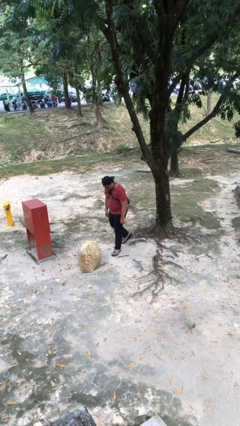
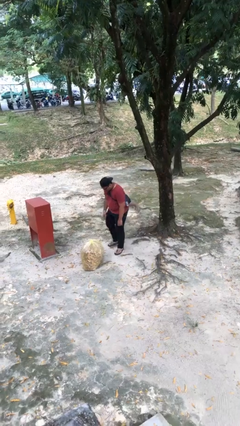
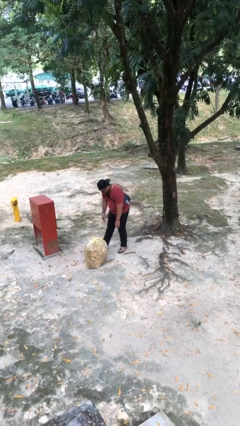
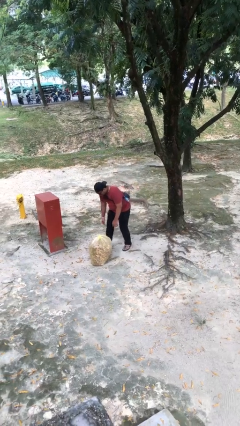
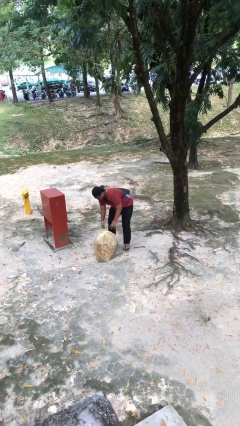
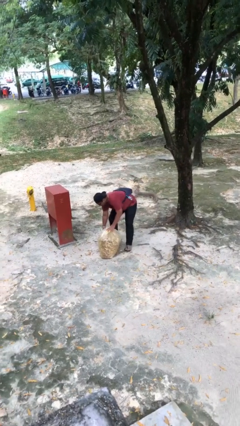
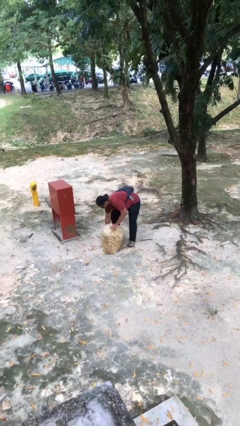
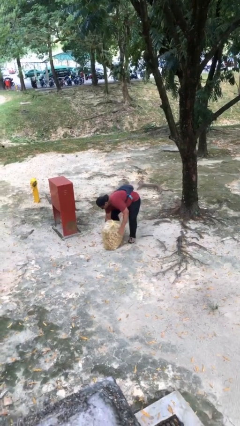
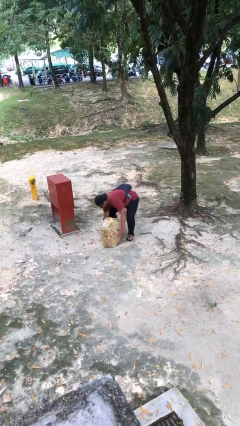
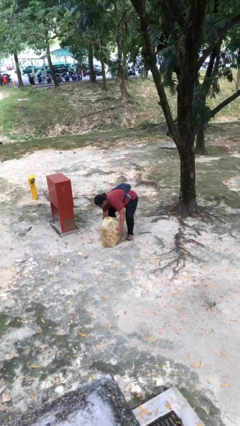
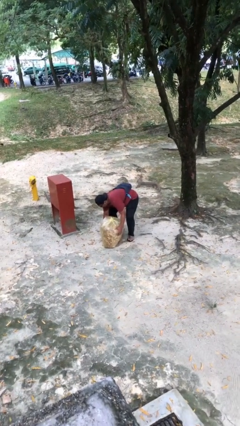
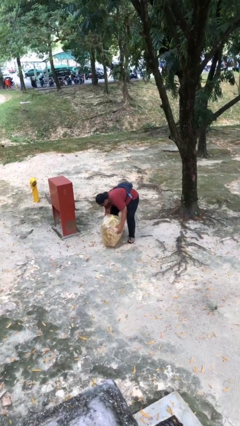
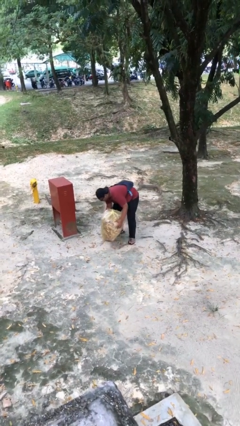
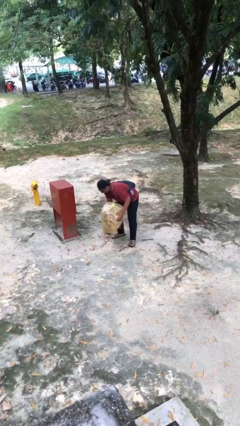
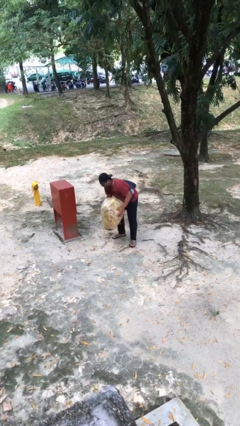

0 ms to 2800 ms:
person picks up object from floor

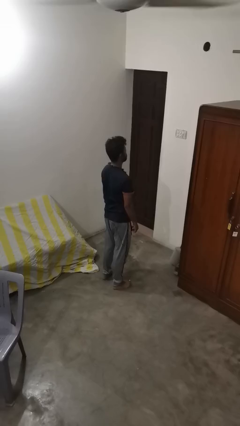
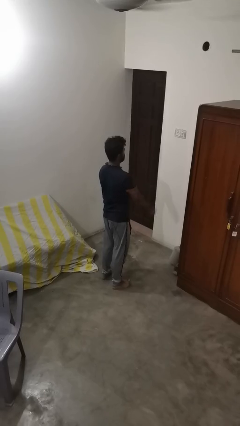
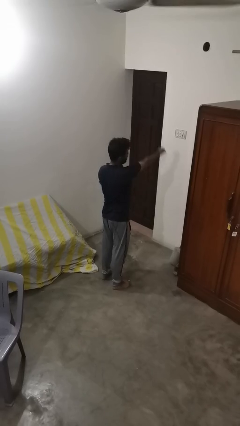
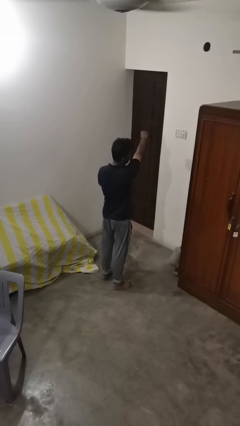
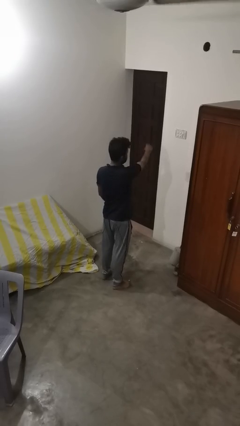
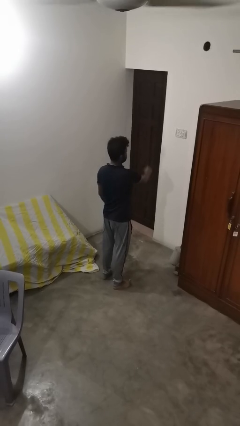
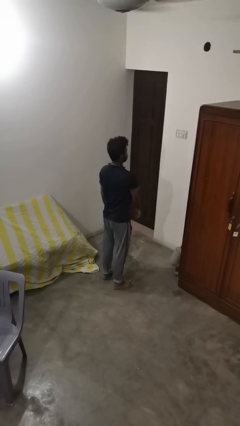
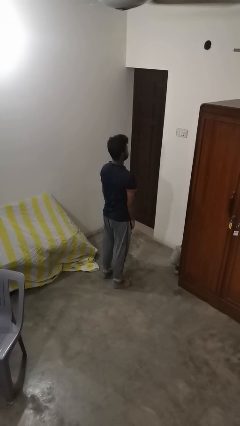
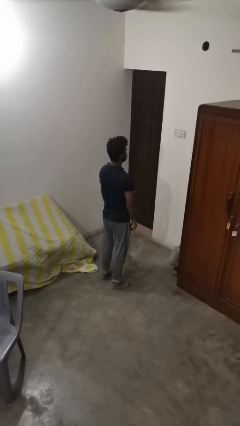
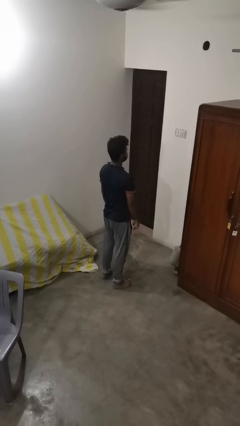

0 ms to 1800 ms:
person punches

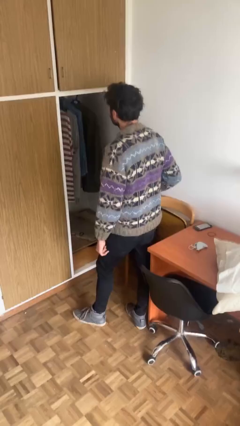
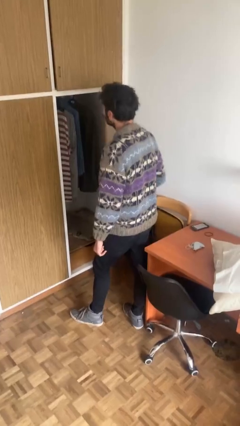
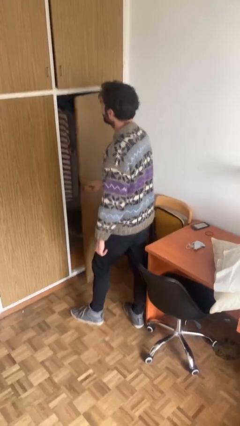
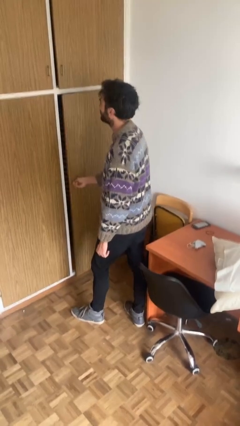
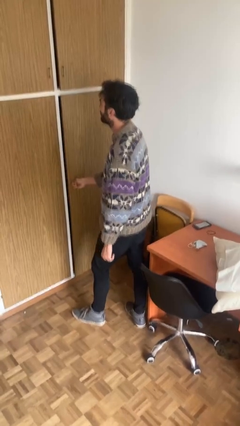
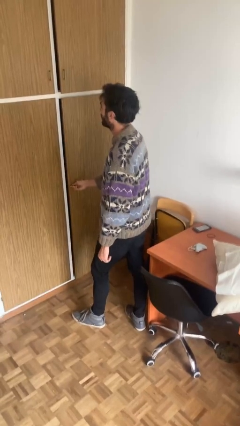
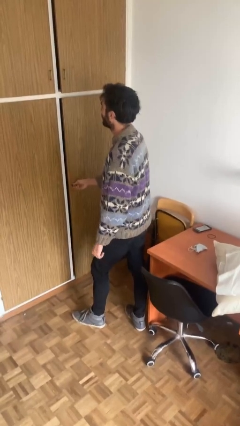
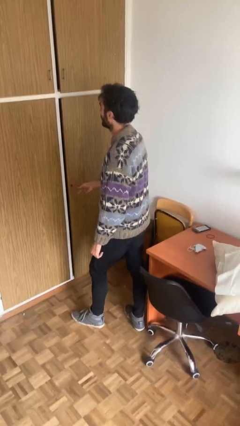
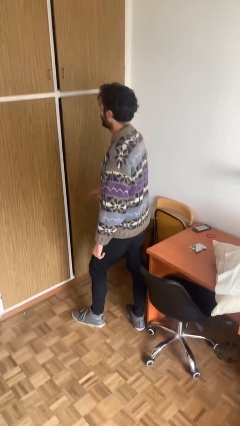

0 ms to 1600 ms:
person closes closet door

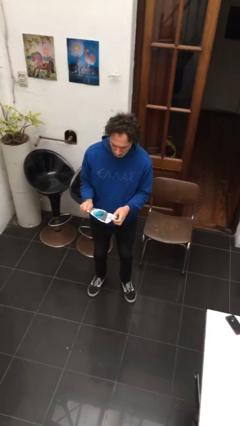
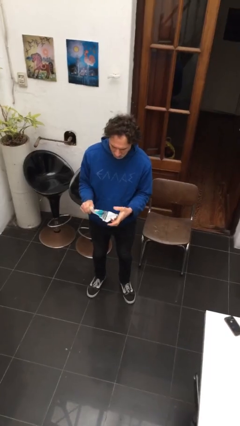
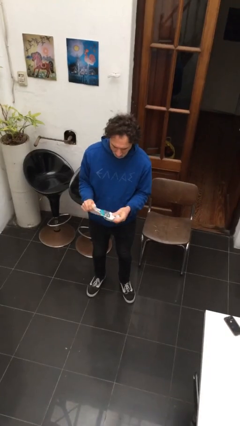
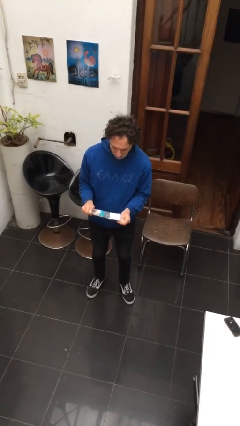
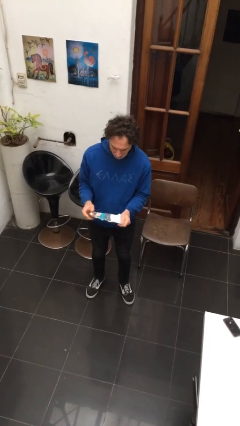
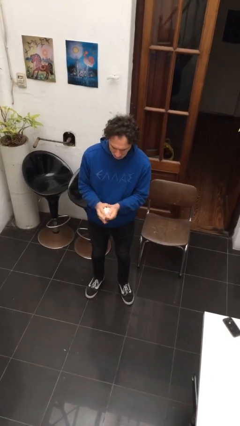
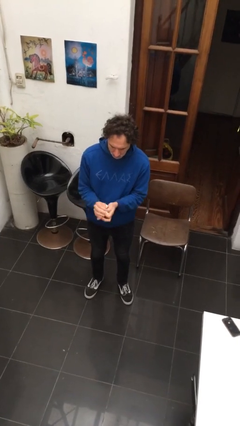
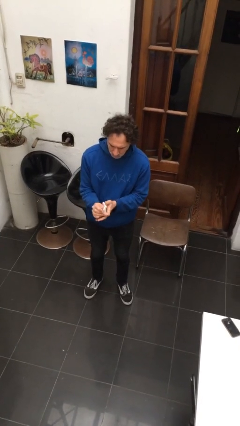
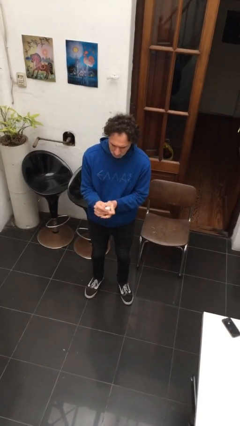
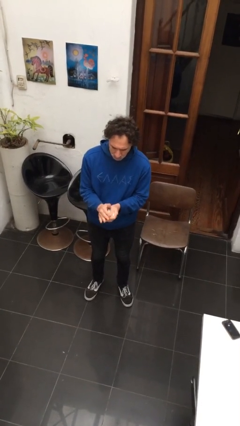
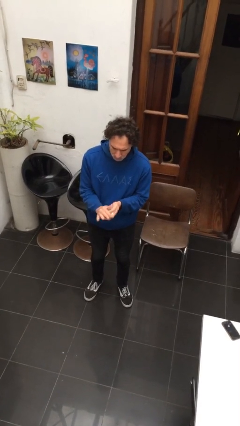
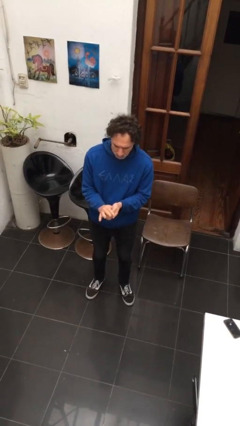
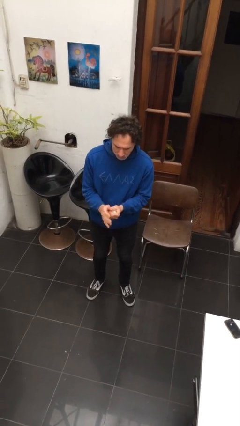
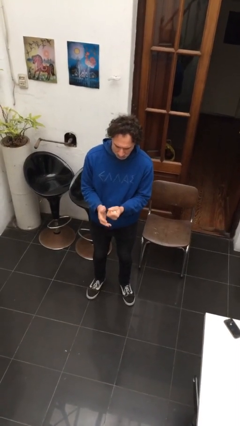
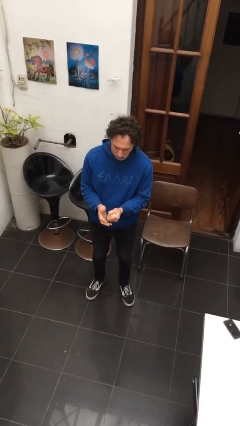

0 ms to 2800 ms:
person crumples paper

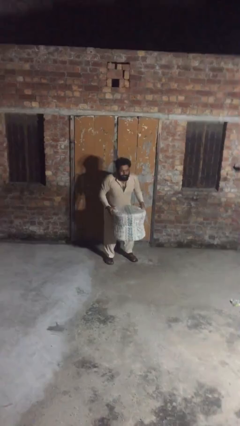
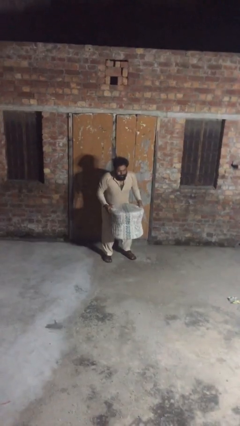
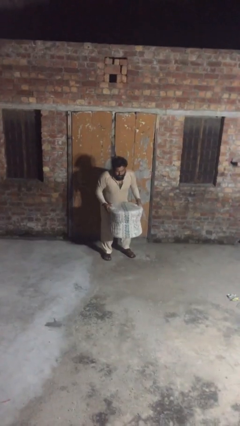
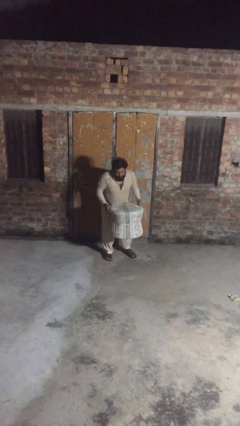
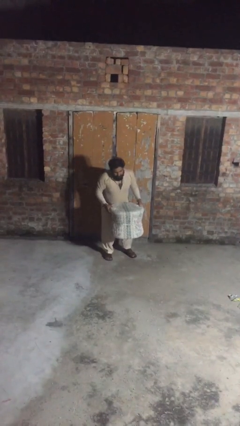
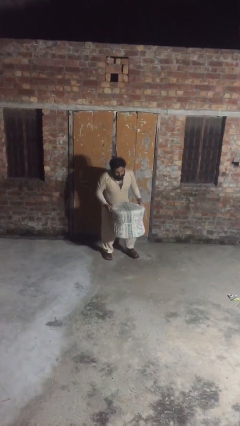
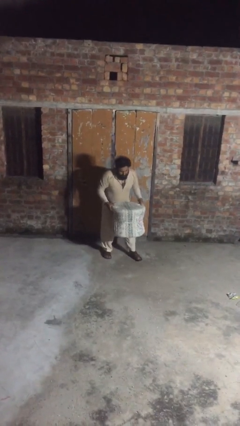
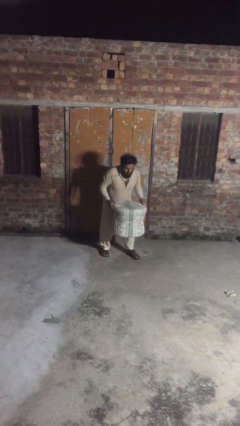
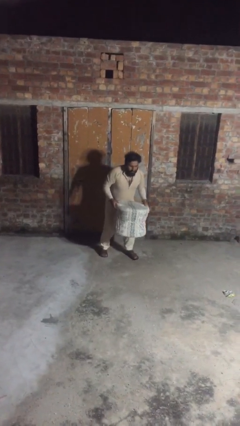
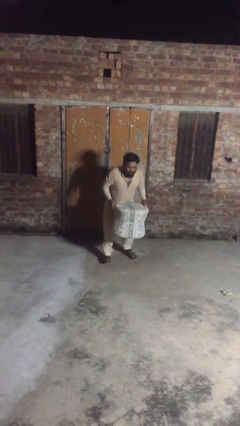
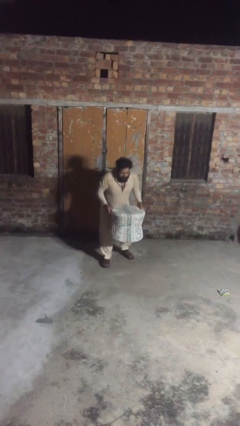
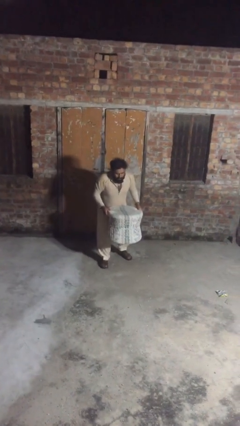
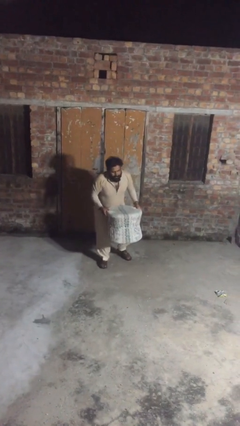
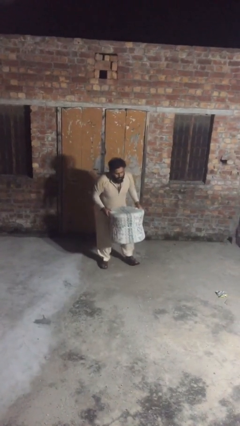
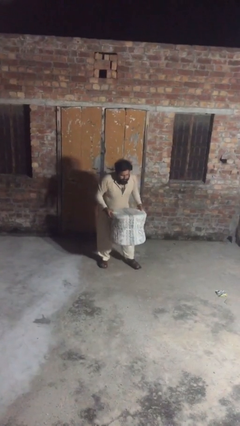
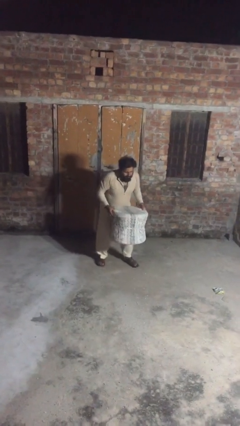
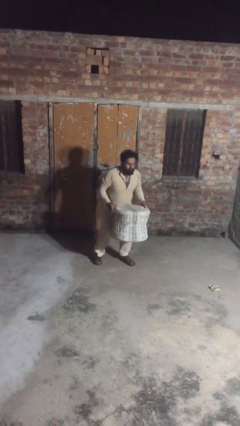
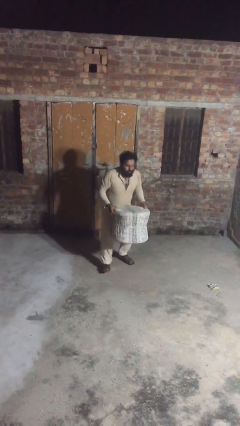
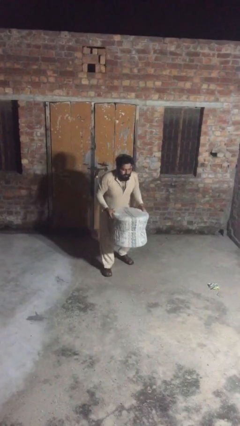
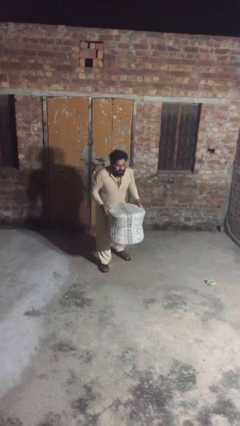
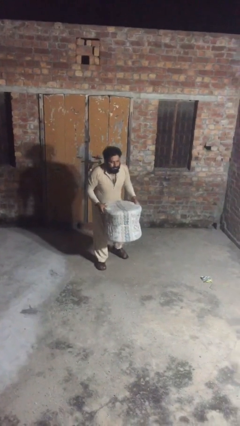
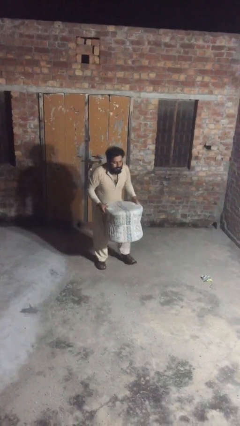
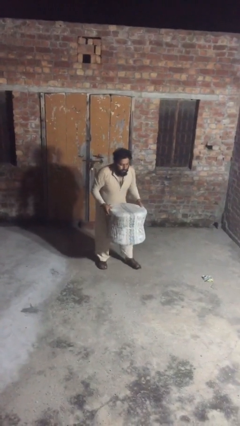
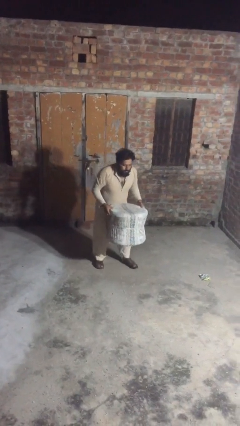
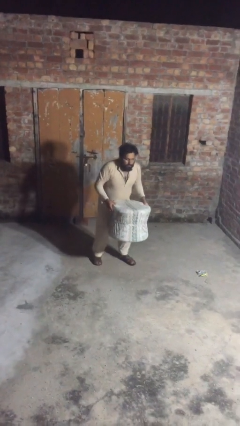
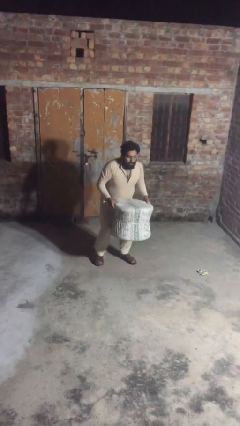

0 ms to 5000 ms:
person carries heavy object

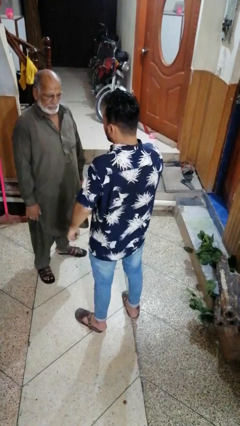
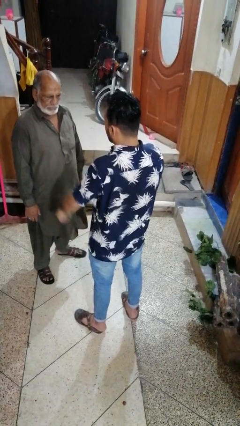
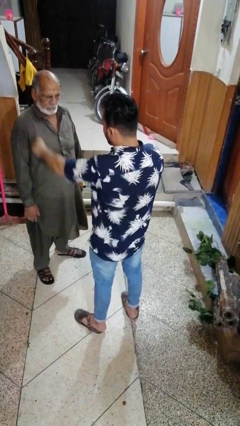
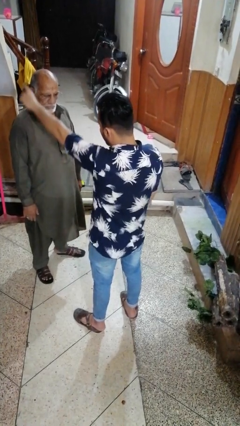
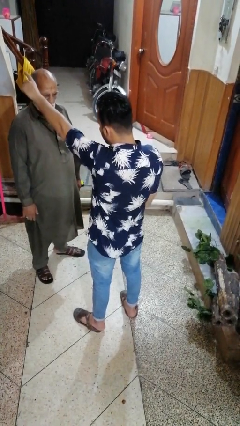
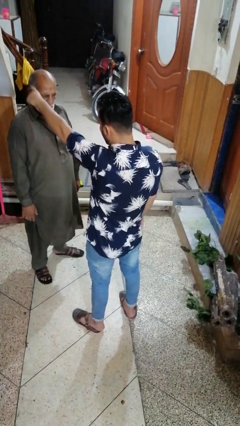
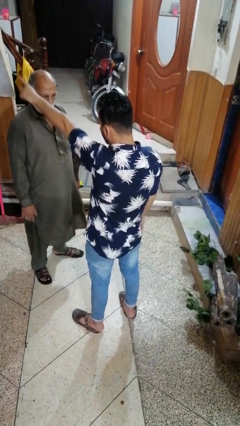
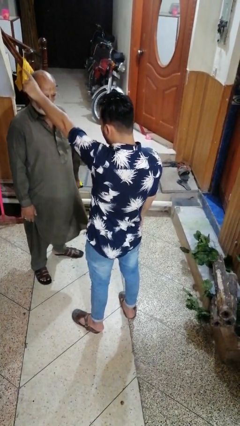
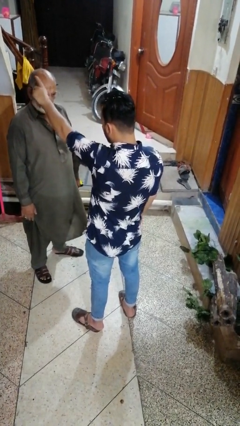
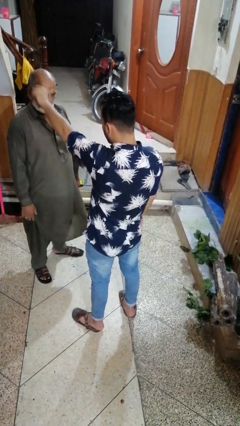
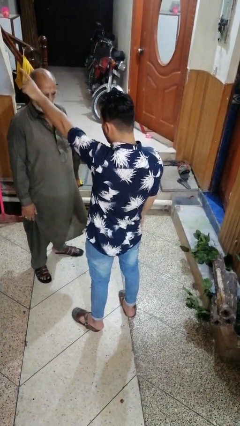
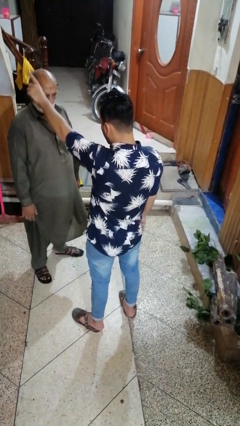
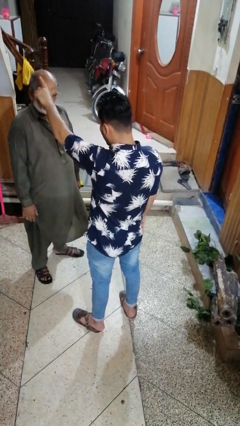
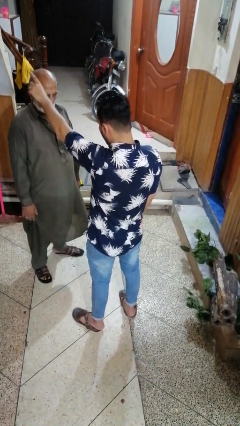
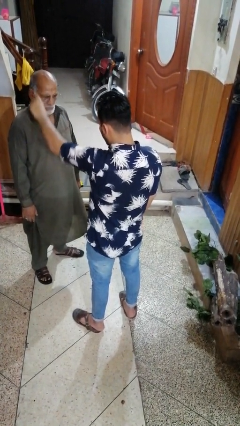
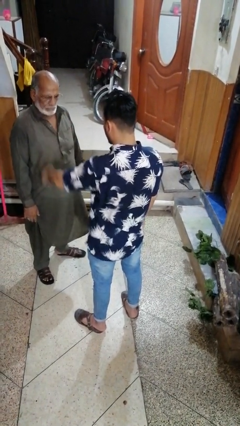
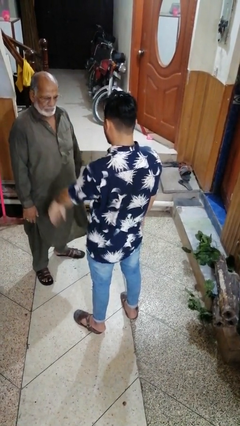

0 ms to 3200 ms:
person shoves person

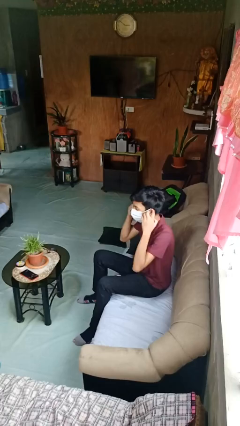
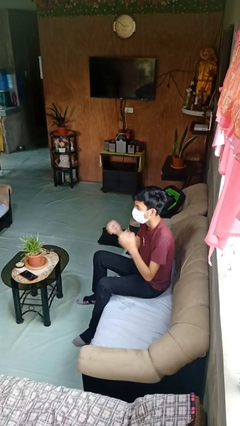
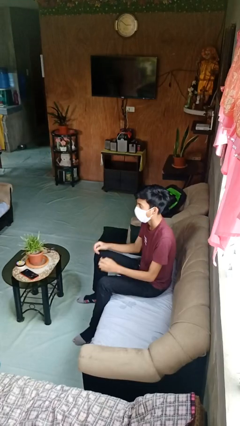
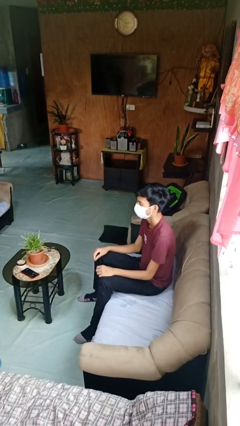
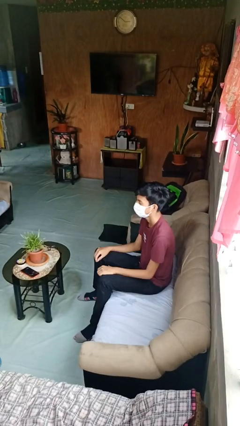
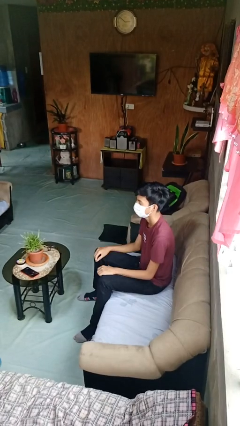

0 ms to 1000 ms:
person puts on facemask
